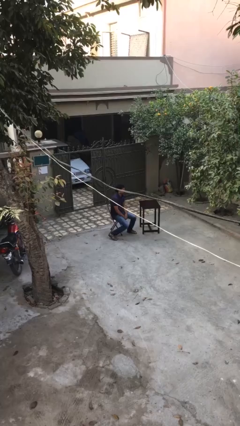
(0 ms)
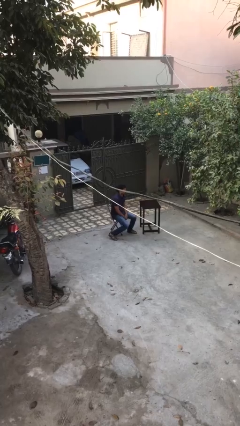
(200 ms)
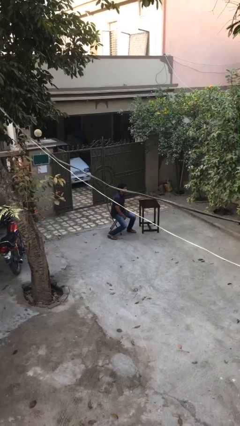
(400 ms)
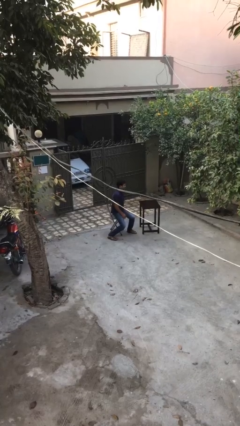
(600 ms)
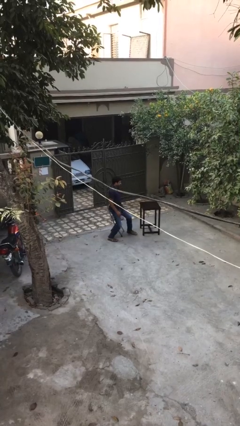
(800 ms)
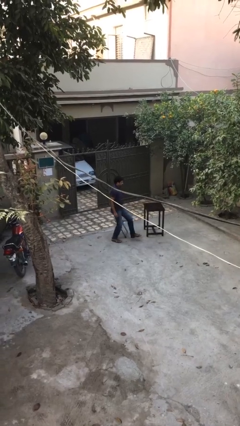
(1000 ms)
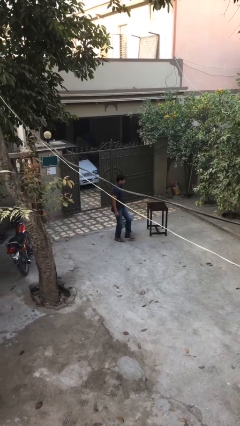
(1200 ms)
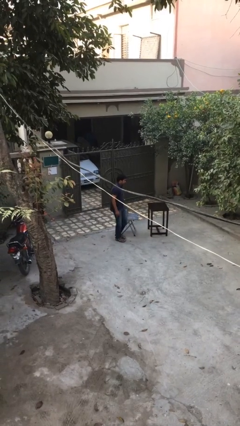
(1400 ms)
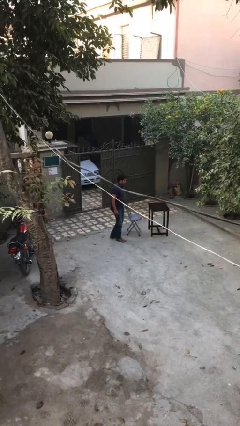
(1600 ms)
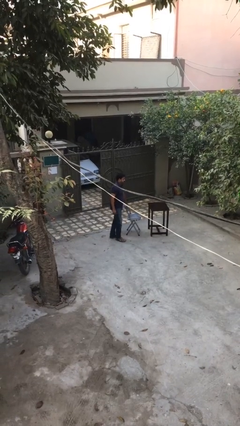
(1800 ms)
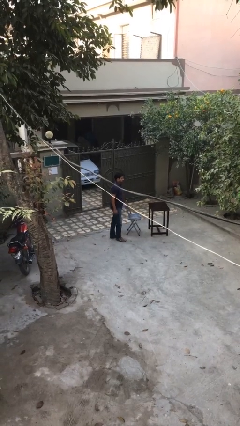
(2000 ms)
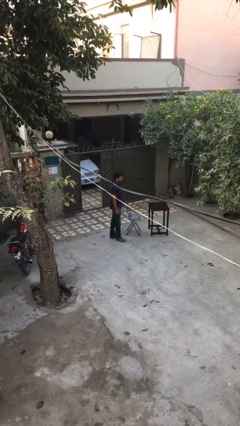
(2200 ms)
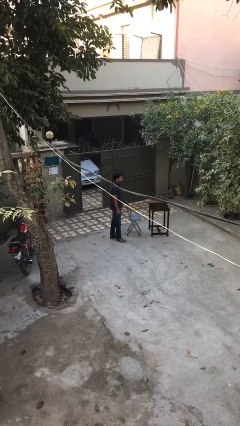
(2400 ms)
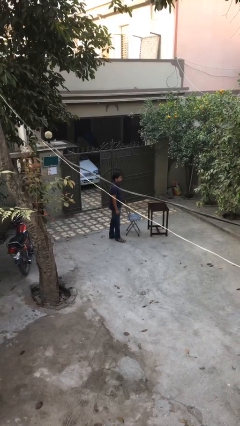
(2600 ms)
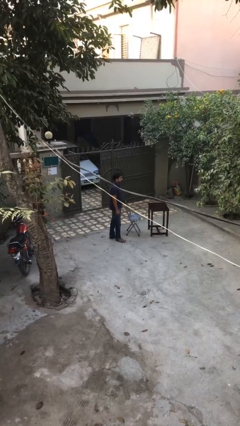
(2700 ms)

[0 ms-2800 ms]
person stands up

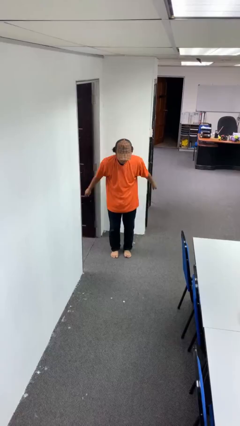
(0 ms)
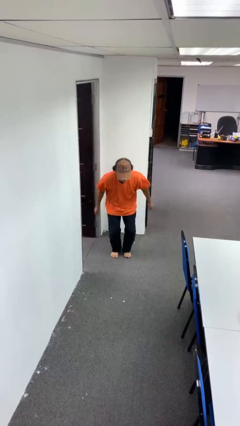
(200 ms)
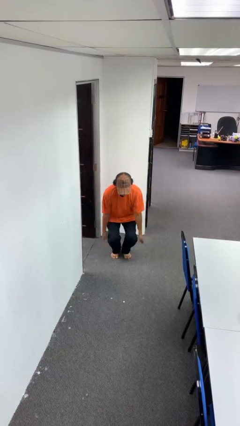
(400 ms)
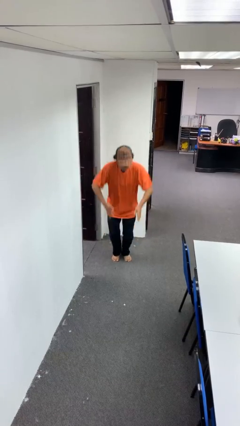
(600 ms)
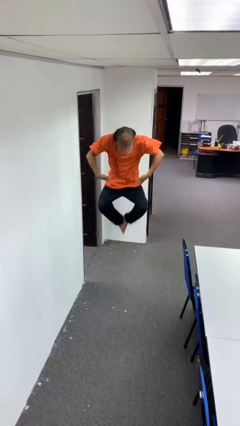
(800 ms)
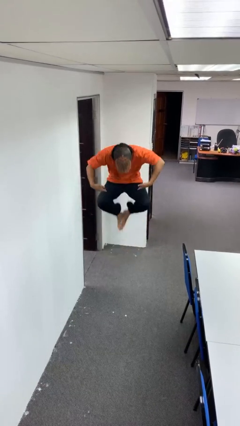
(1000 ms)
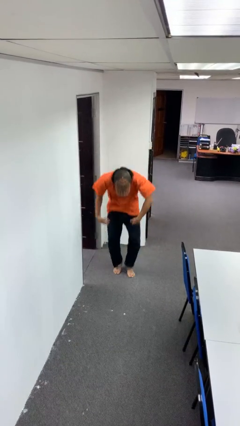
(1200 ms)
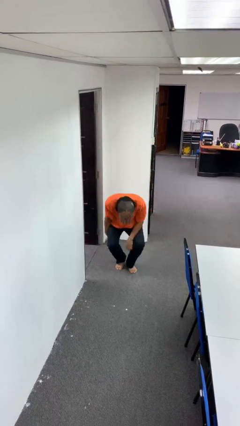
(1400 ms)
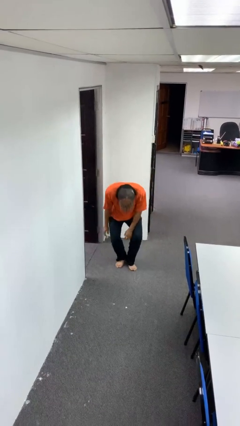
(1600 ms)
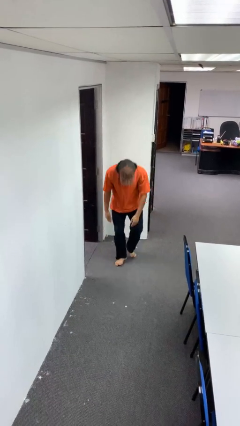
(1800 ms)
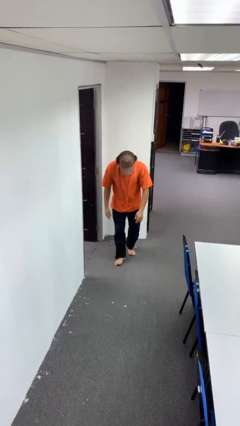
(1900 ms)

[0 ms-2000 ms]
person jumps

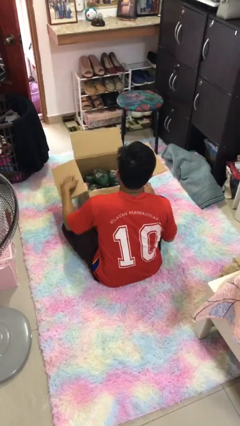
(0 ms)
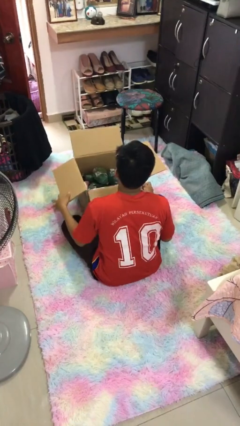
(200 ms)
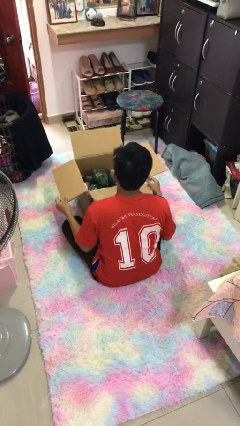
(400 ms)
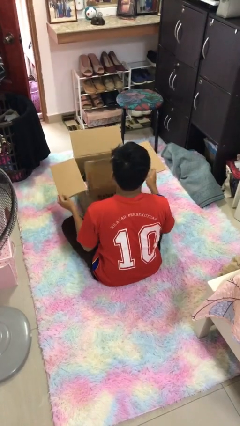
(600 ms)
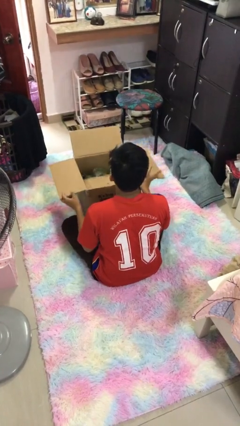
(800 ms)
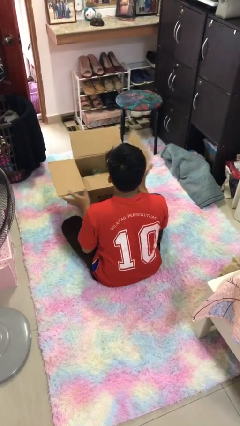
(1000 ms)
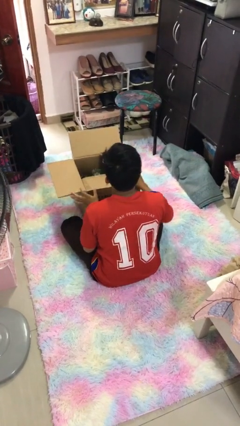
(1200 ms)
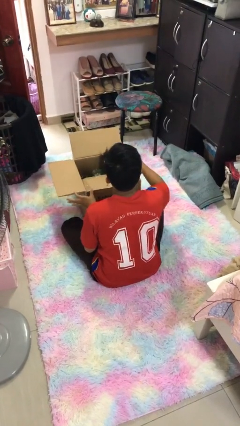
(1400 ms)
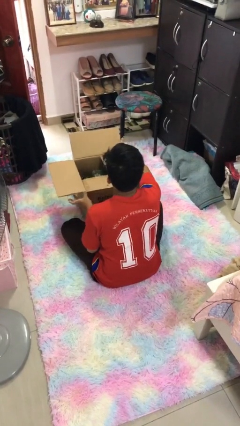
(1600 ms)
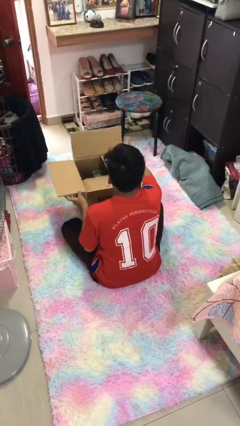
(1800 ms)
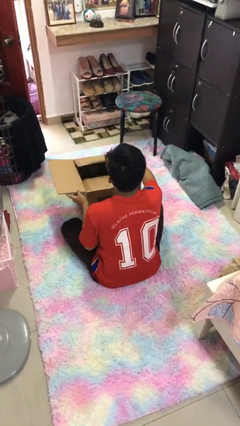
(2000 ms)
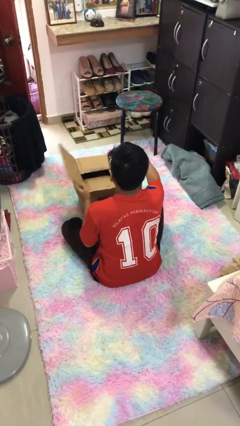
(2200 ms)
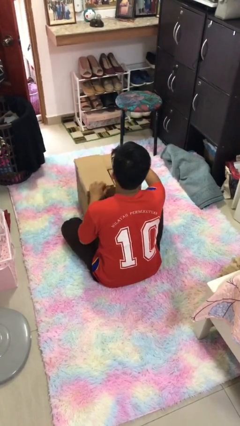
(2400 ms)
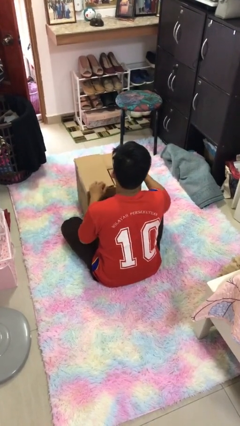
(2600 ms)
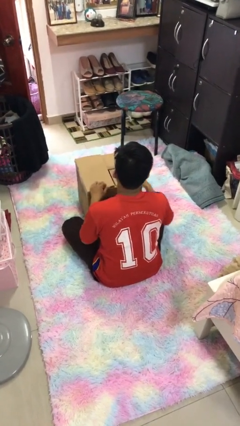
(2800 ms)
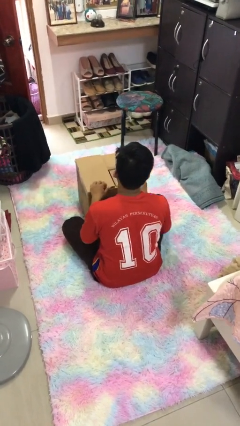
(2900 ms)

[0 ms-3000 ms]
person closes box

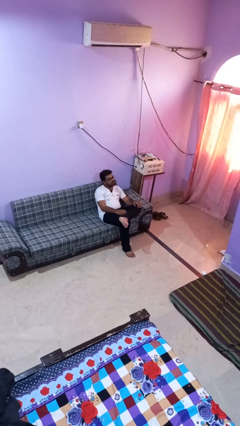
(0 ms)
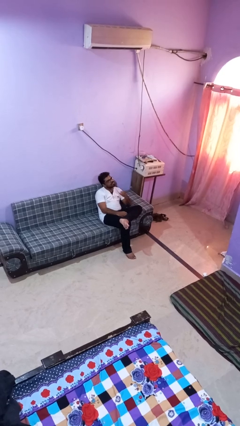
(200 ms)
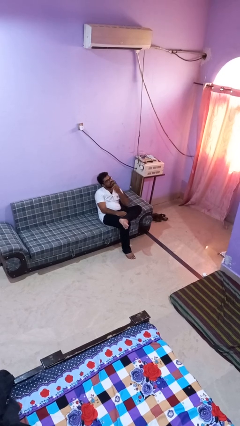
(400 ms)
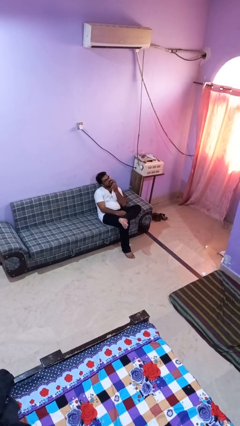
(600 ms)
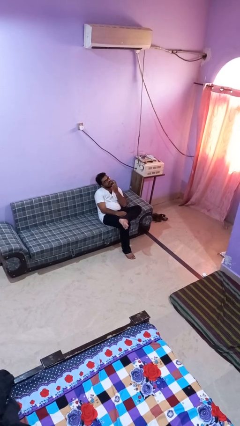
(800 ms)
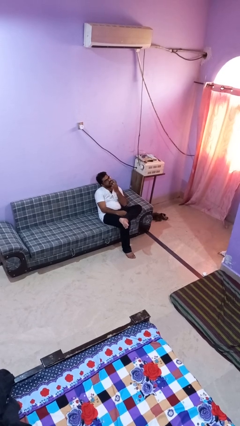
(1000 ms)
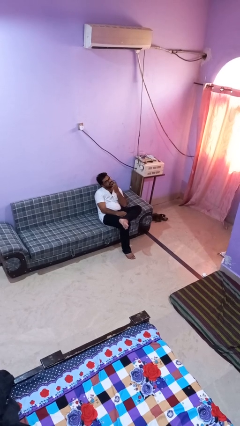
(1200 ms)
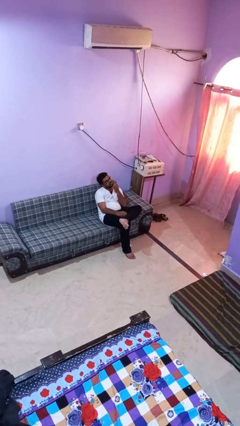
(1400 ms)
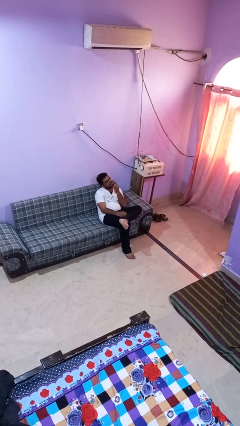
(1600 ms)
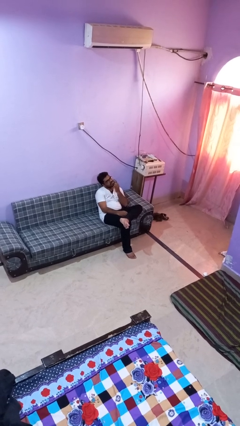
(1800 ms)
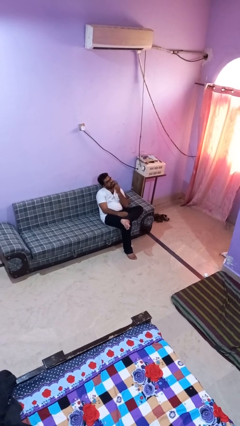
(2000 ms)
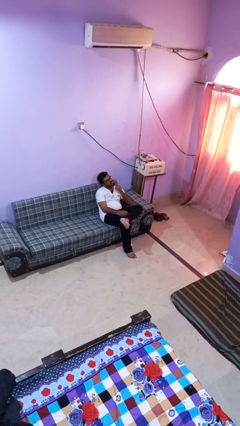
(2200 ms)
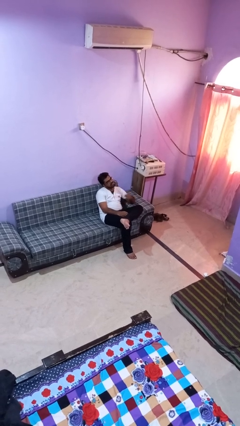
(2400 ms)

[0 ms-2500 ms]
person strokes chin

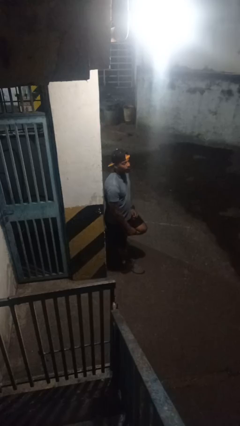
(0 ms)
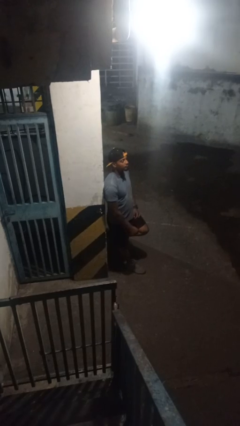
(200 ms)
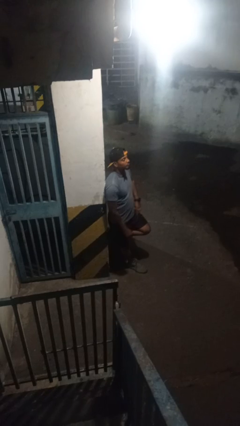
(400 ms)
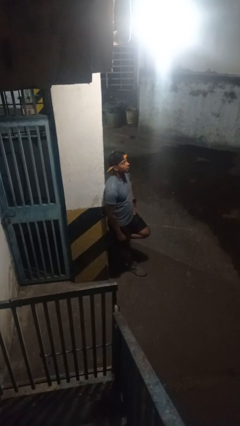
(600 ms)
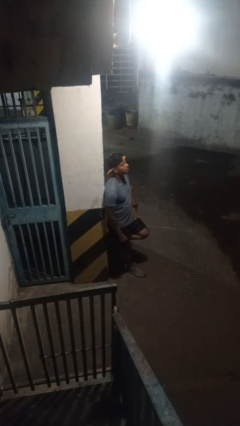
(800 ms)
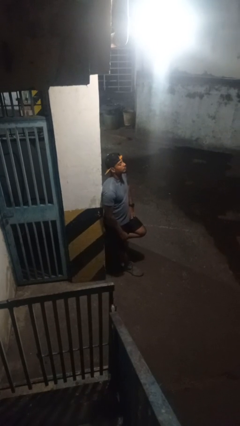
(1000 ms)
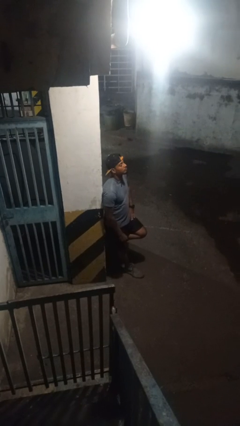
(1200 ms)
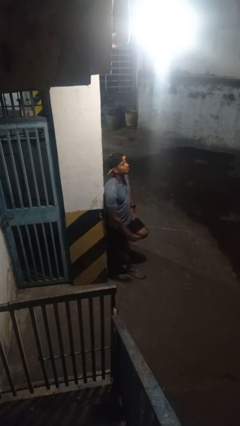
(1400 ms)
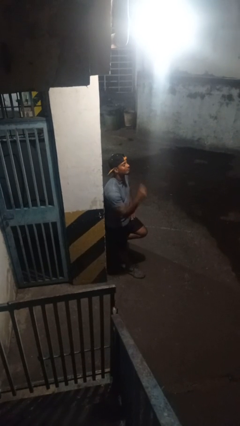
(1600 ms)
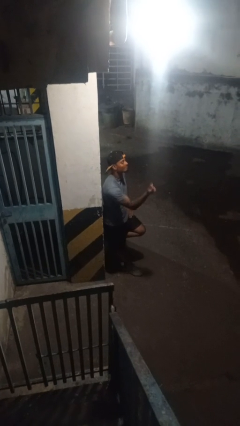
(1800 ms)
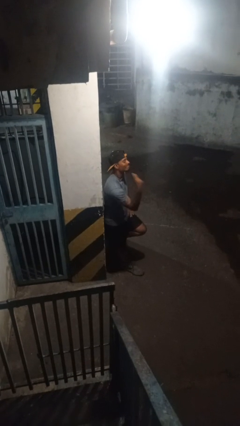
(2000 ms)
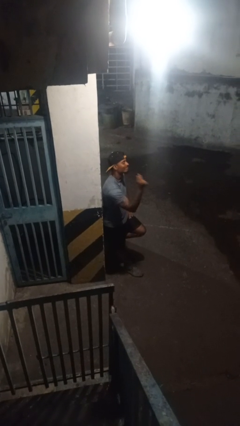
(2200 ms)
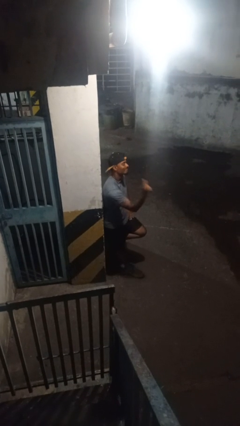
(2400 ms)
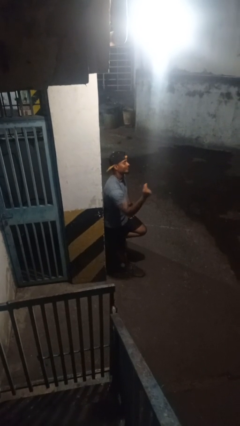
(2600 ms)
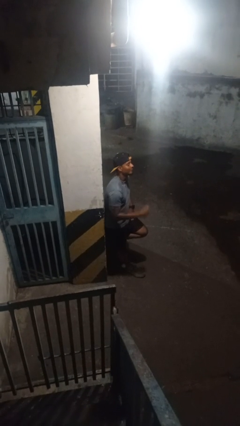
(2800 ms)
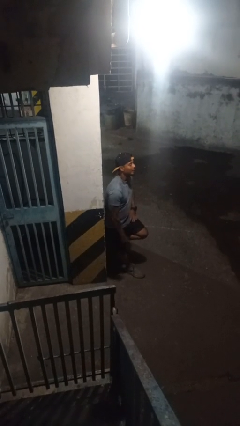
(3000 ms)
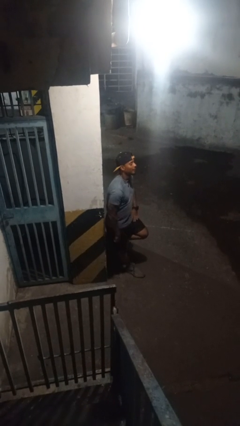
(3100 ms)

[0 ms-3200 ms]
person snaps fingers

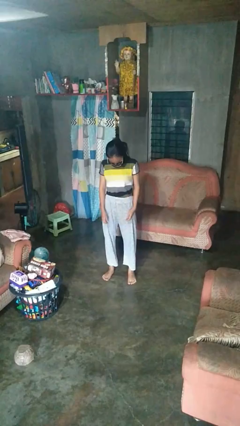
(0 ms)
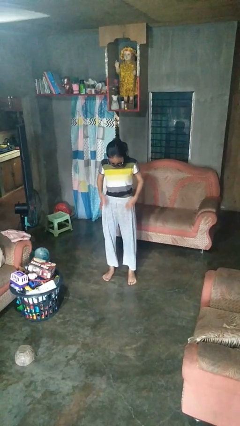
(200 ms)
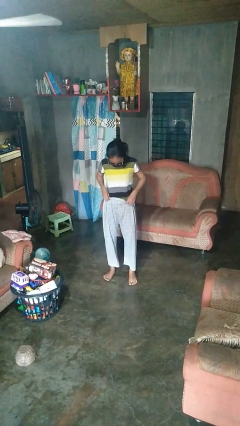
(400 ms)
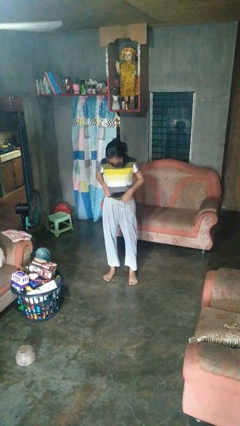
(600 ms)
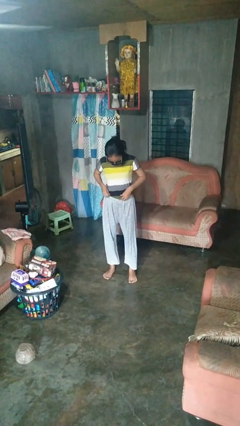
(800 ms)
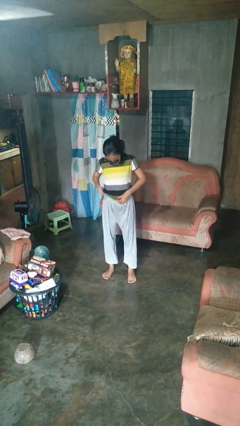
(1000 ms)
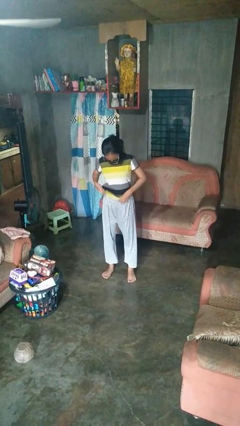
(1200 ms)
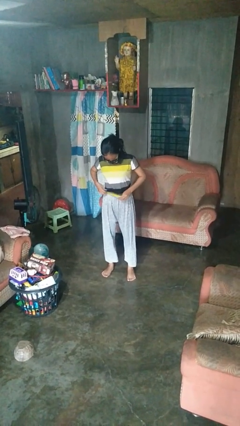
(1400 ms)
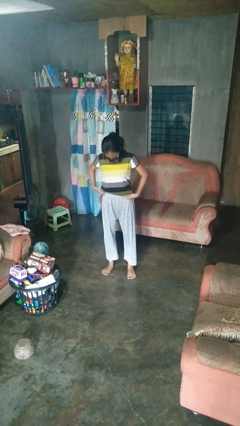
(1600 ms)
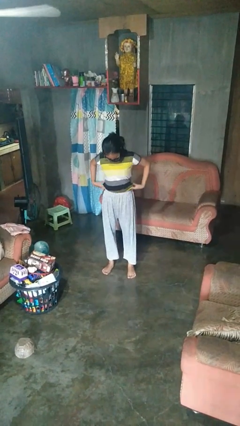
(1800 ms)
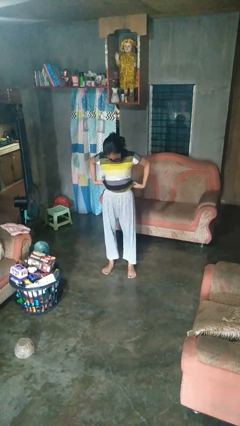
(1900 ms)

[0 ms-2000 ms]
person untucks shirt

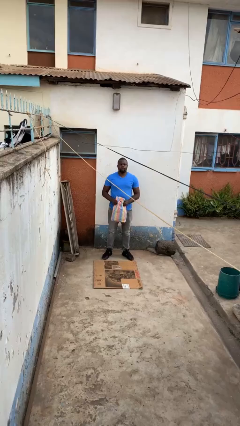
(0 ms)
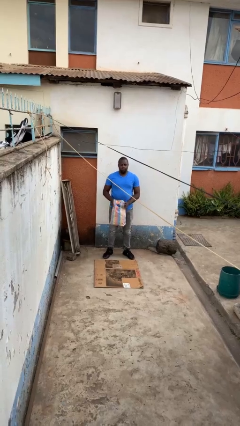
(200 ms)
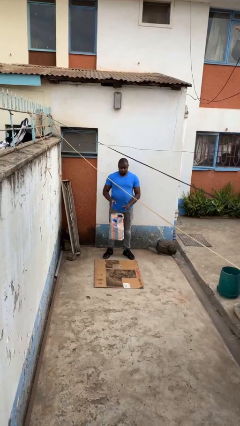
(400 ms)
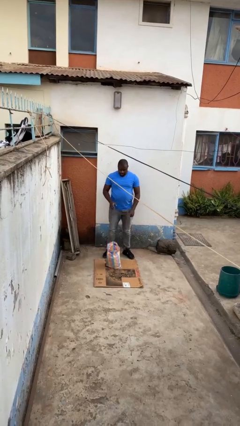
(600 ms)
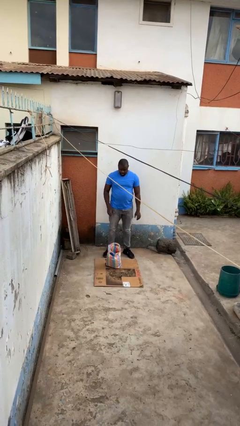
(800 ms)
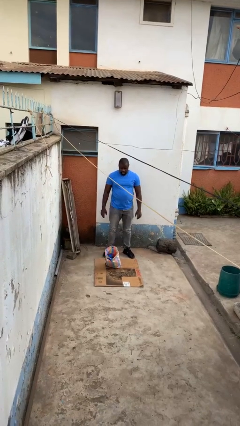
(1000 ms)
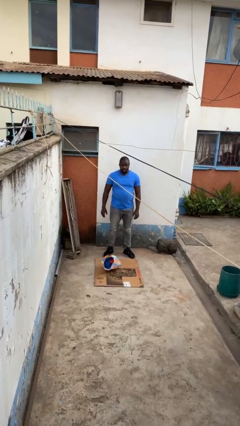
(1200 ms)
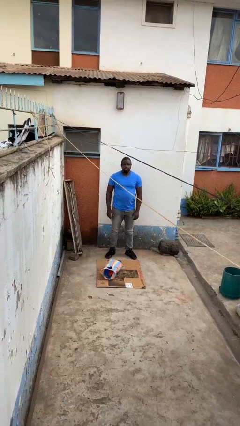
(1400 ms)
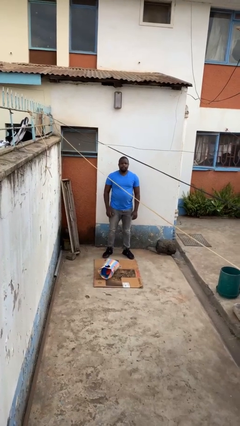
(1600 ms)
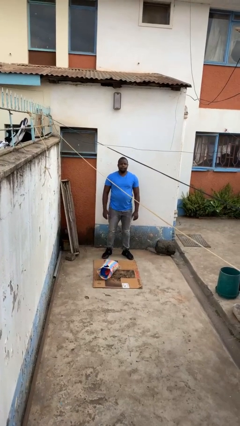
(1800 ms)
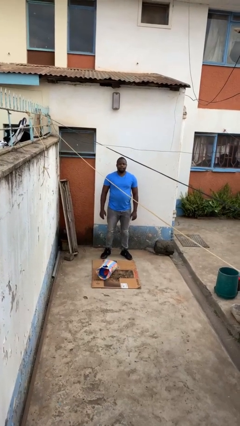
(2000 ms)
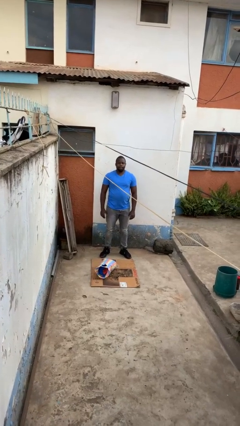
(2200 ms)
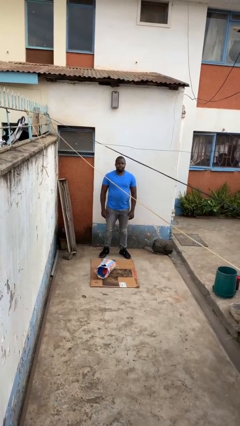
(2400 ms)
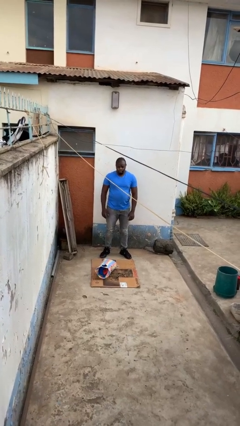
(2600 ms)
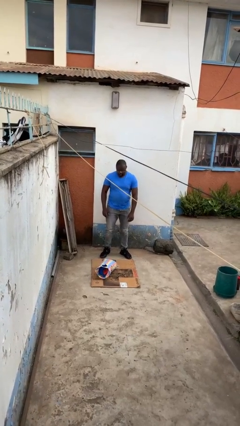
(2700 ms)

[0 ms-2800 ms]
person drops object
